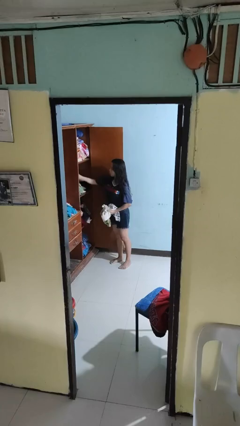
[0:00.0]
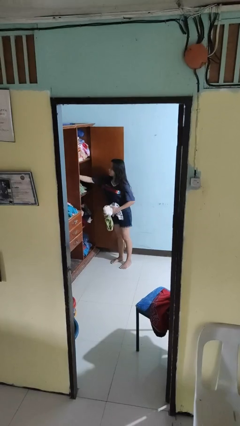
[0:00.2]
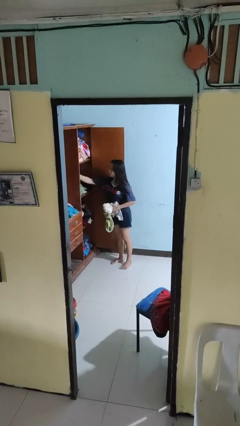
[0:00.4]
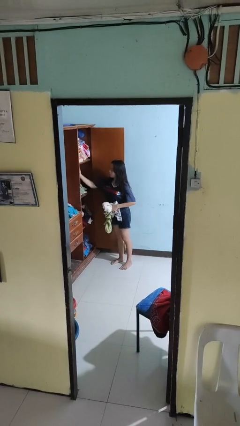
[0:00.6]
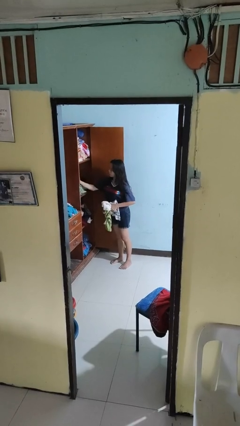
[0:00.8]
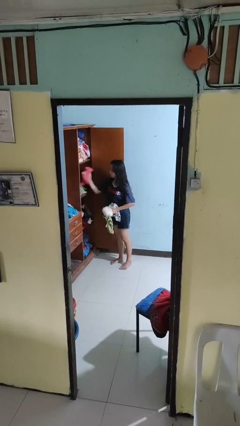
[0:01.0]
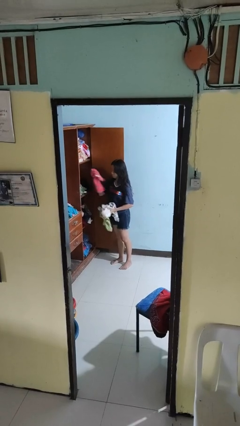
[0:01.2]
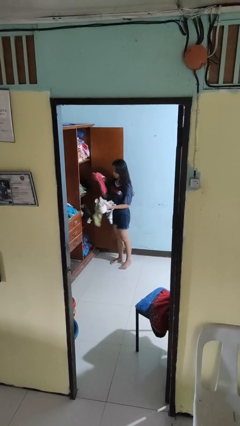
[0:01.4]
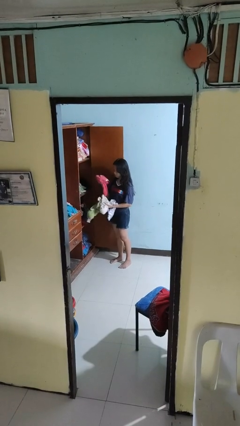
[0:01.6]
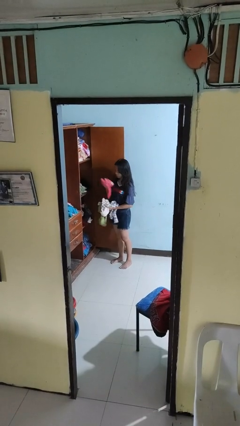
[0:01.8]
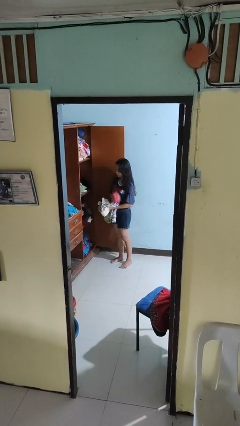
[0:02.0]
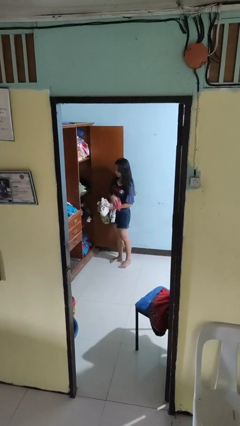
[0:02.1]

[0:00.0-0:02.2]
person takes clothes from dresser

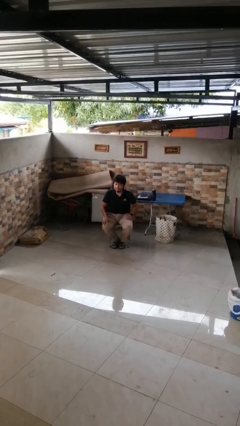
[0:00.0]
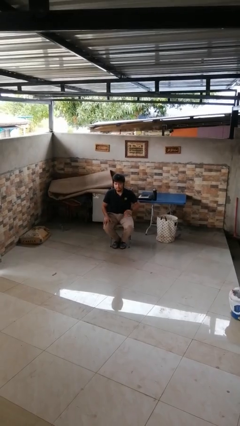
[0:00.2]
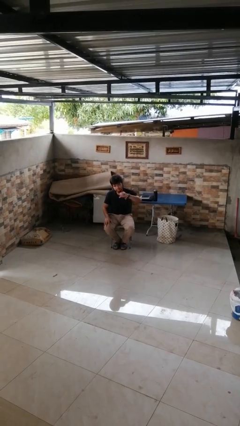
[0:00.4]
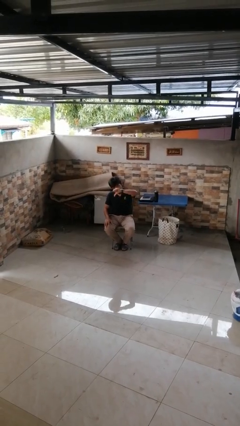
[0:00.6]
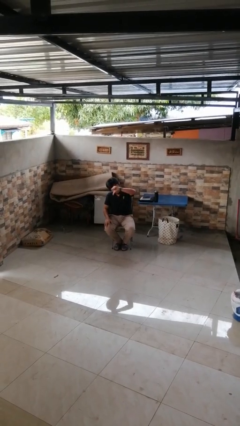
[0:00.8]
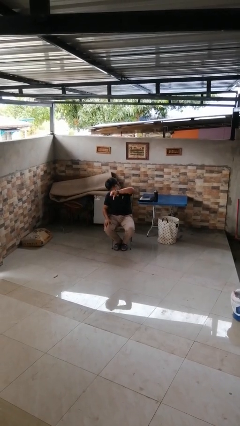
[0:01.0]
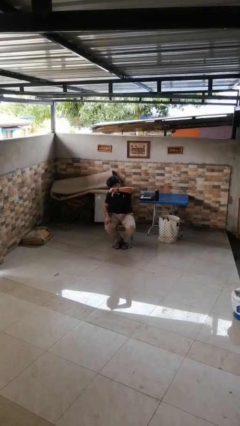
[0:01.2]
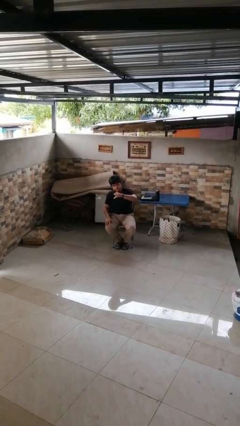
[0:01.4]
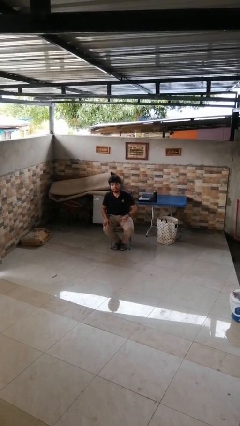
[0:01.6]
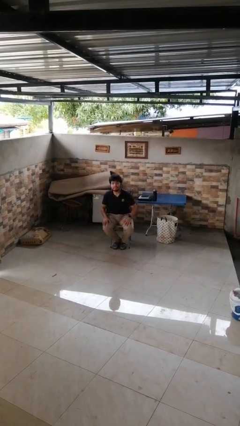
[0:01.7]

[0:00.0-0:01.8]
person gestures thumbs down

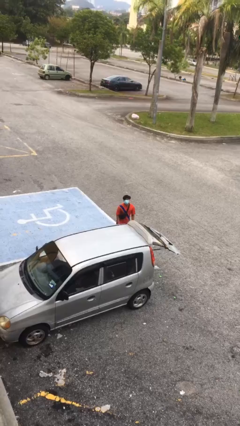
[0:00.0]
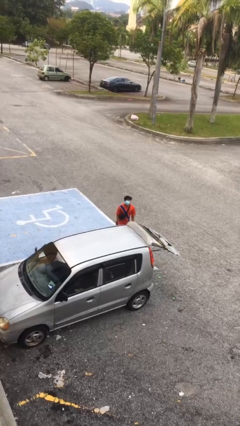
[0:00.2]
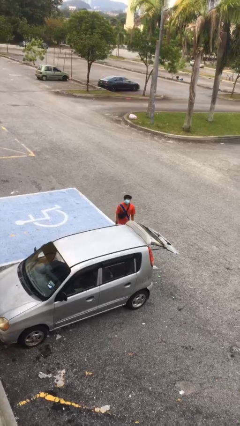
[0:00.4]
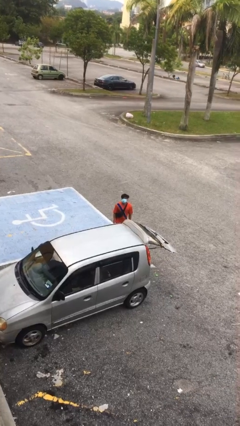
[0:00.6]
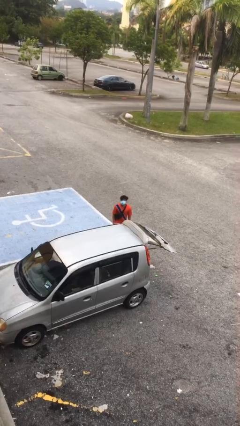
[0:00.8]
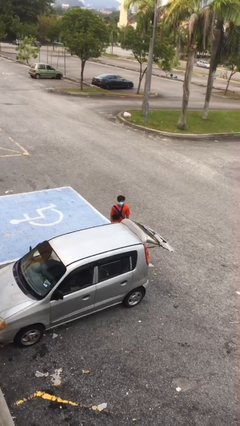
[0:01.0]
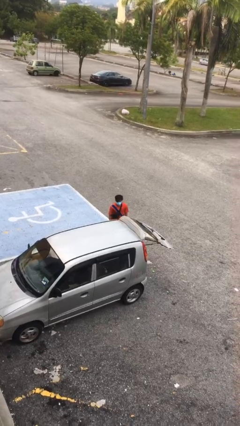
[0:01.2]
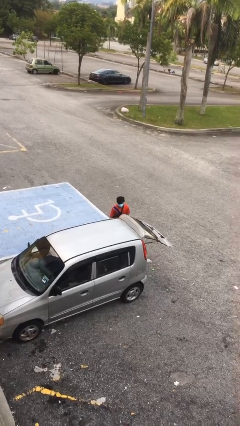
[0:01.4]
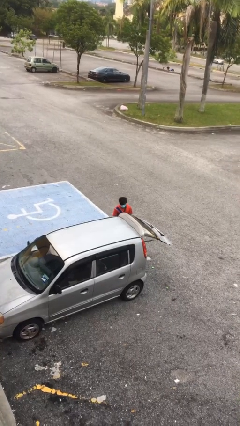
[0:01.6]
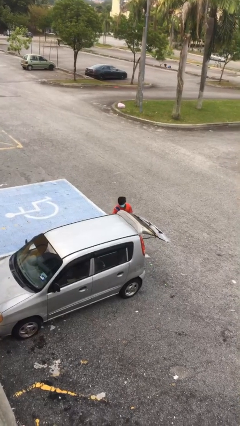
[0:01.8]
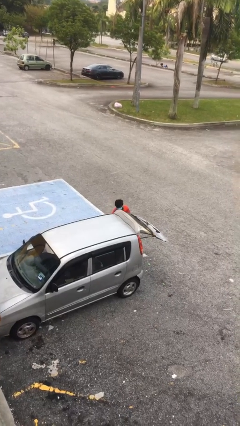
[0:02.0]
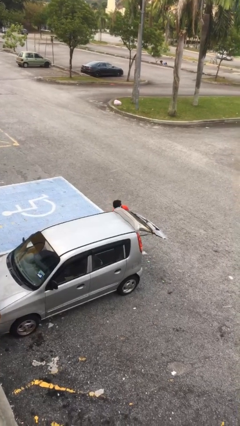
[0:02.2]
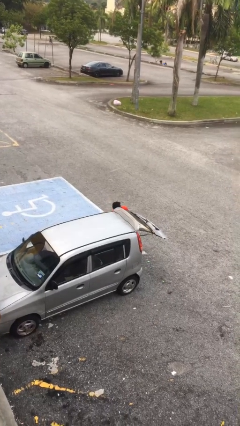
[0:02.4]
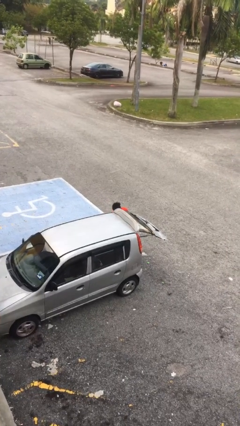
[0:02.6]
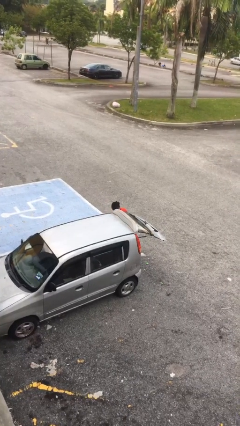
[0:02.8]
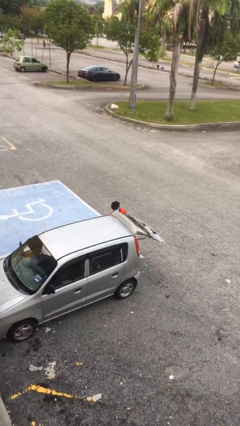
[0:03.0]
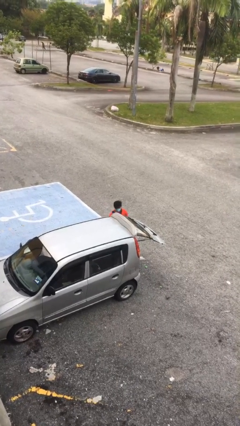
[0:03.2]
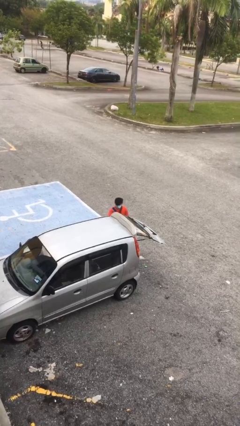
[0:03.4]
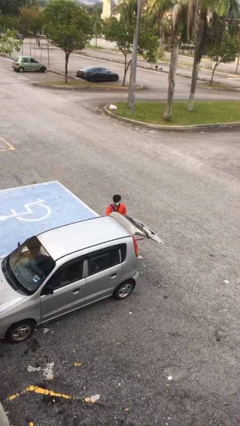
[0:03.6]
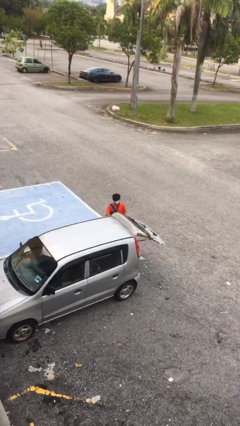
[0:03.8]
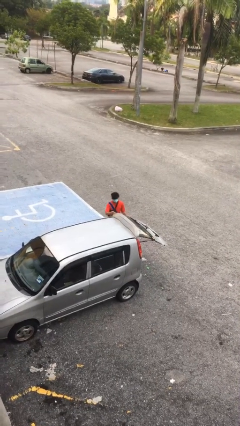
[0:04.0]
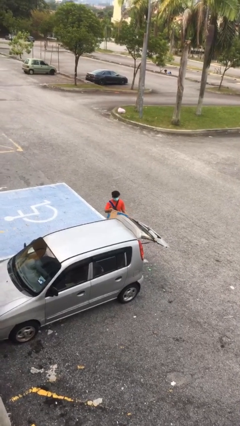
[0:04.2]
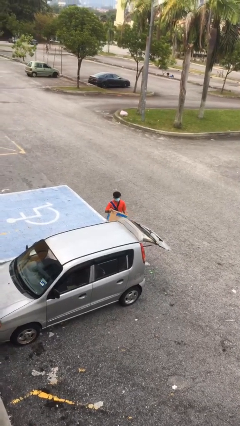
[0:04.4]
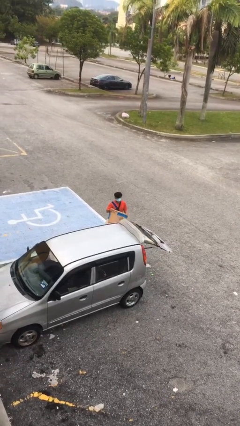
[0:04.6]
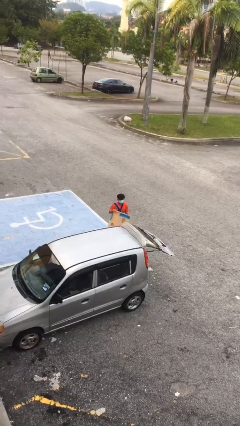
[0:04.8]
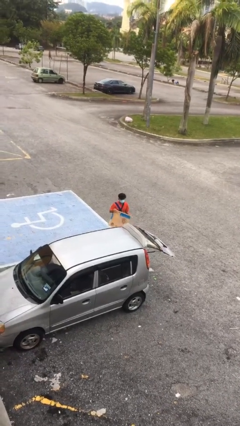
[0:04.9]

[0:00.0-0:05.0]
person unloads car

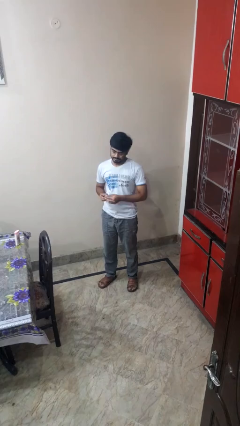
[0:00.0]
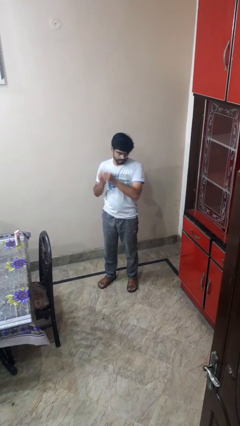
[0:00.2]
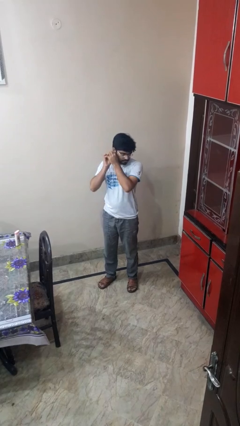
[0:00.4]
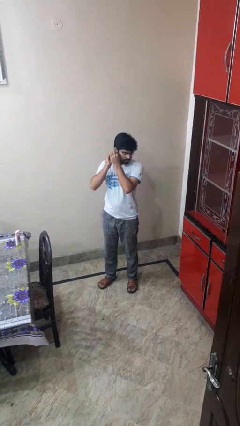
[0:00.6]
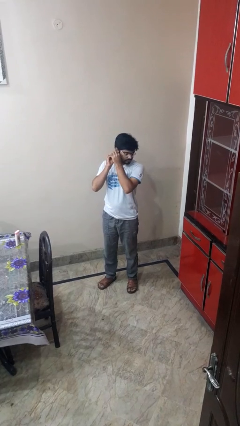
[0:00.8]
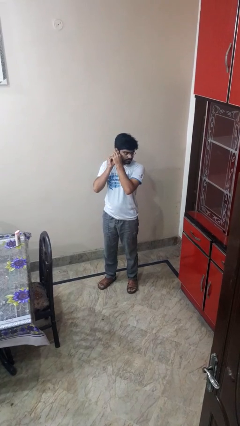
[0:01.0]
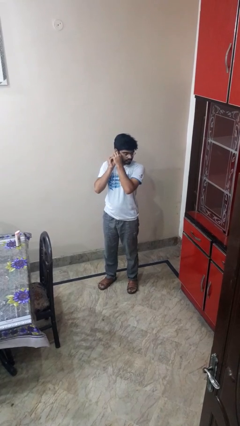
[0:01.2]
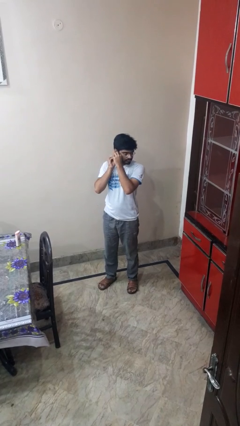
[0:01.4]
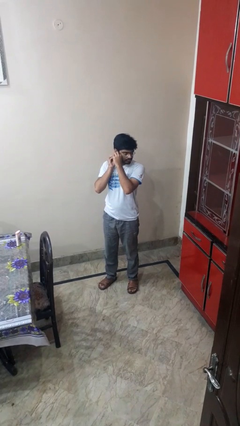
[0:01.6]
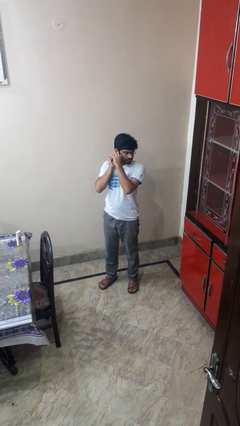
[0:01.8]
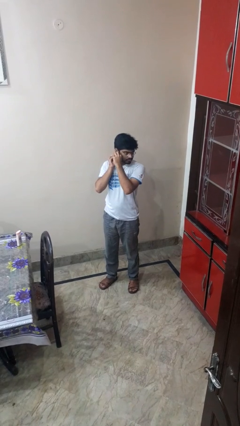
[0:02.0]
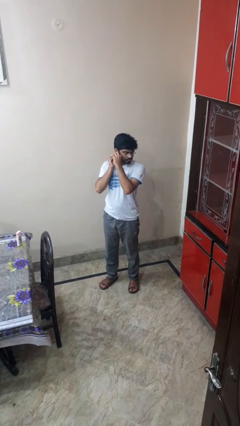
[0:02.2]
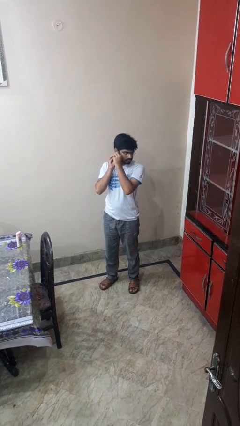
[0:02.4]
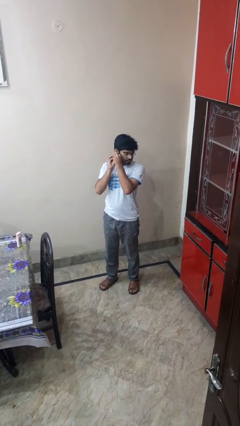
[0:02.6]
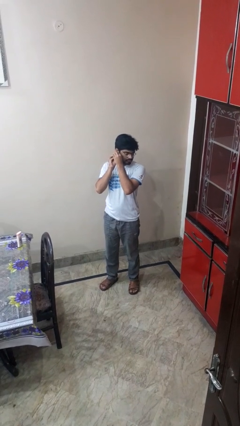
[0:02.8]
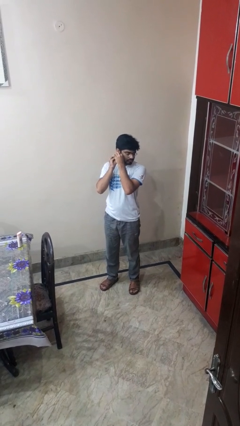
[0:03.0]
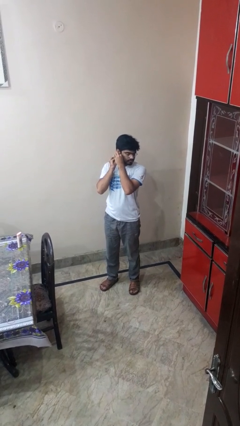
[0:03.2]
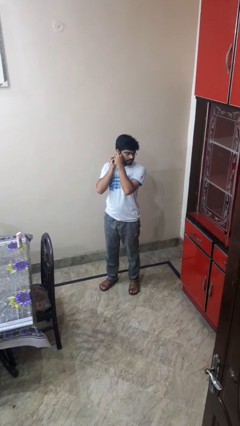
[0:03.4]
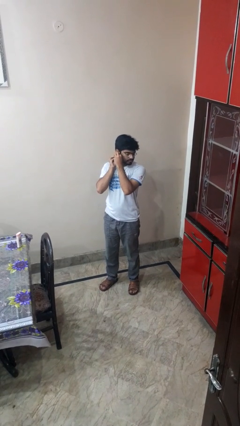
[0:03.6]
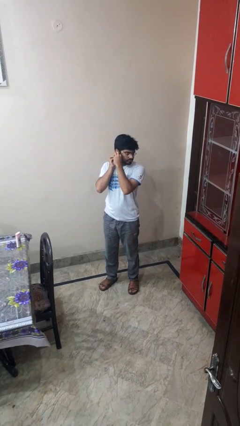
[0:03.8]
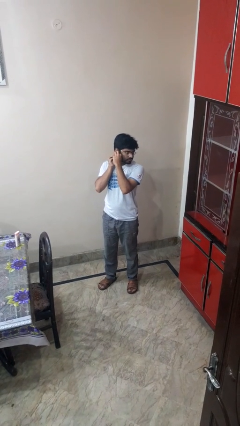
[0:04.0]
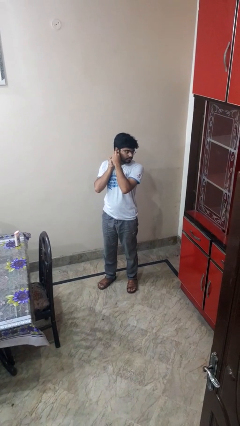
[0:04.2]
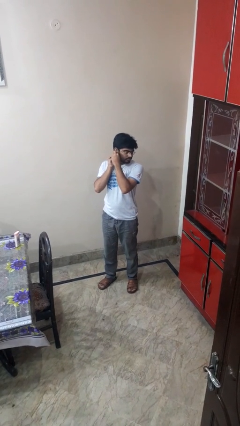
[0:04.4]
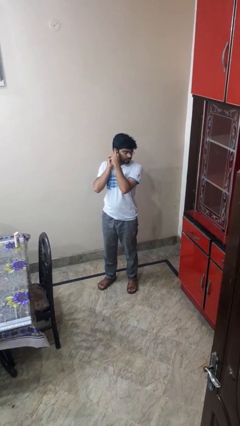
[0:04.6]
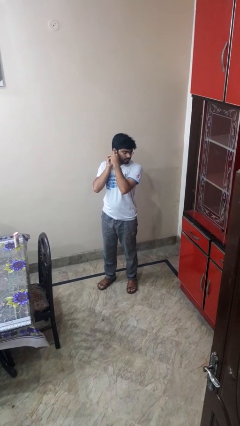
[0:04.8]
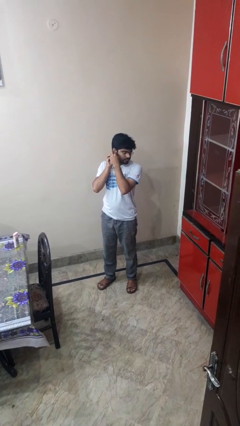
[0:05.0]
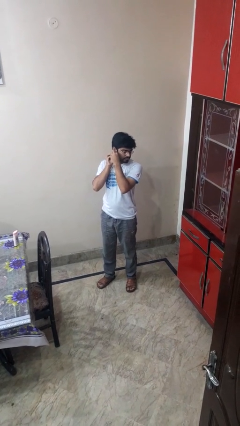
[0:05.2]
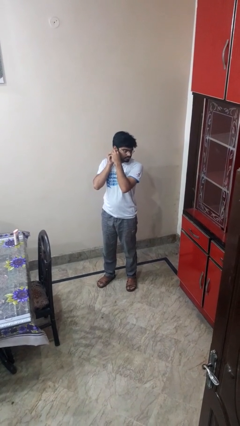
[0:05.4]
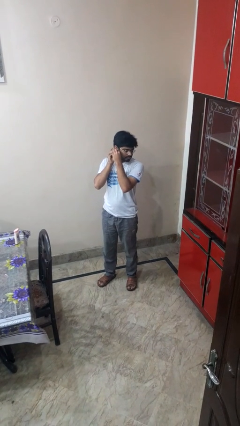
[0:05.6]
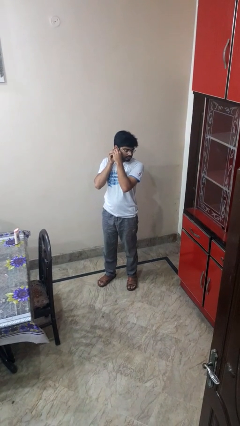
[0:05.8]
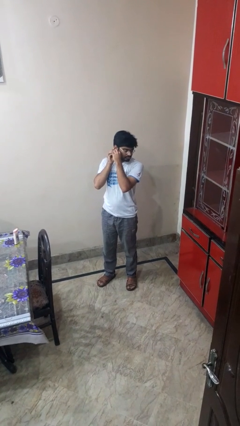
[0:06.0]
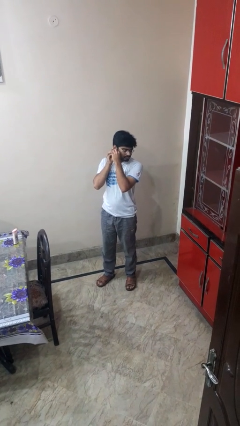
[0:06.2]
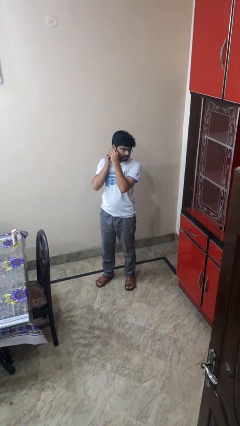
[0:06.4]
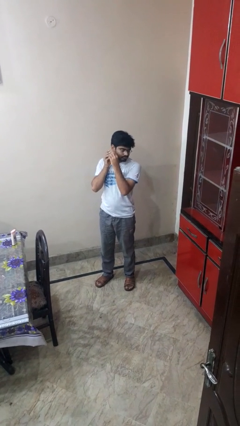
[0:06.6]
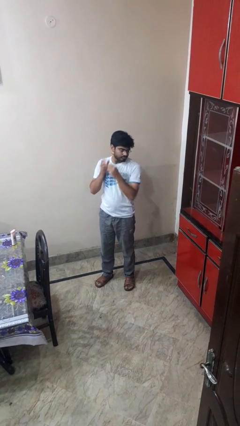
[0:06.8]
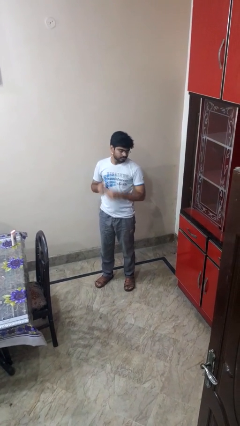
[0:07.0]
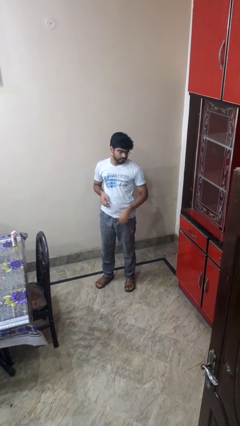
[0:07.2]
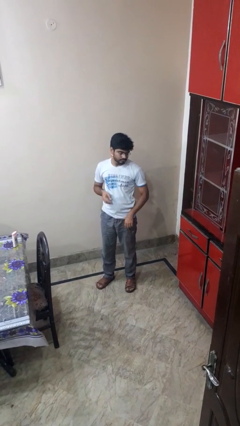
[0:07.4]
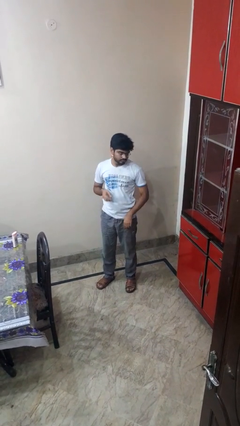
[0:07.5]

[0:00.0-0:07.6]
person puts on earrings

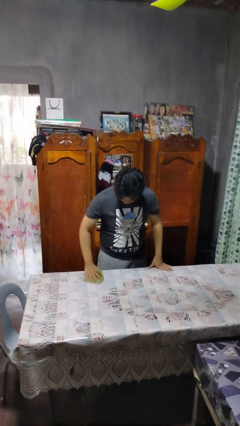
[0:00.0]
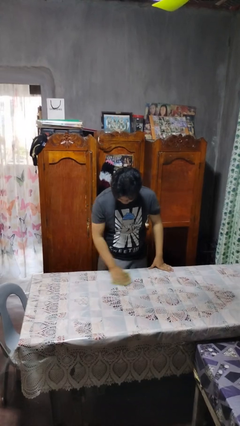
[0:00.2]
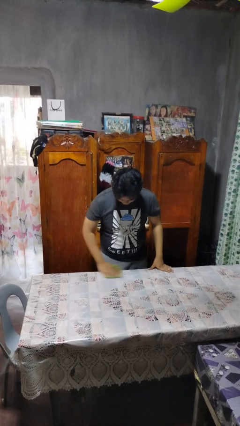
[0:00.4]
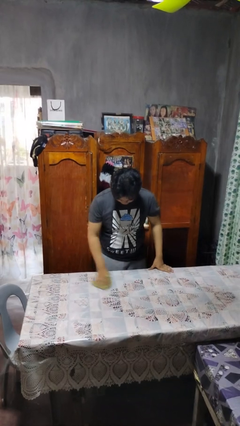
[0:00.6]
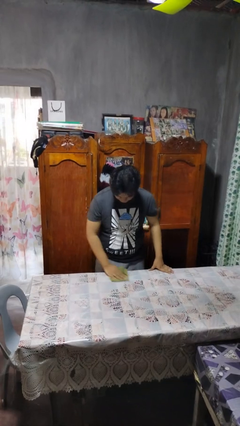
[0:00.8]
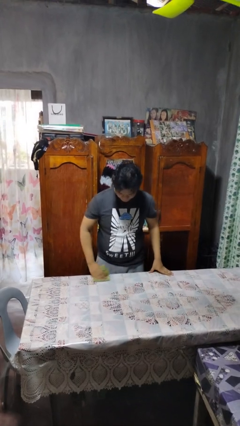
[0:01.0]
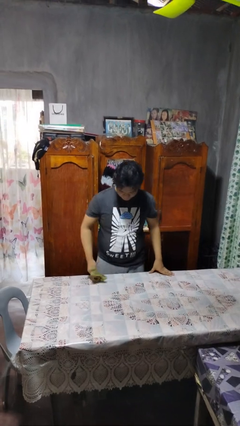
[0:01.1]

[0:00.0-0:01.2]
person cleans table with rag
